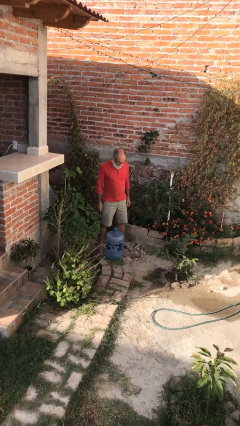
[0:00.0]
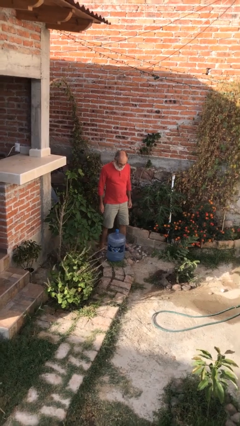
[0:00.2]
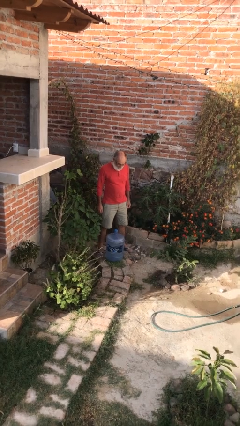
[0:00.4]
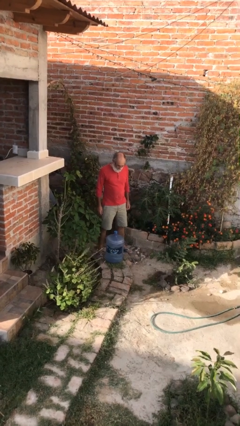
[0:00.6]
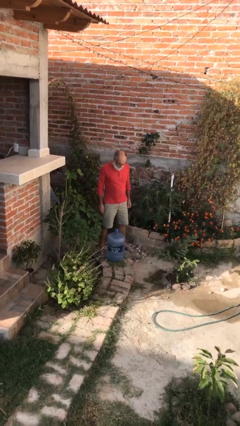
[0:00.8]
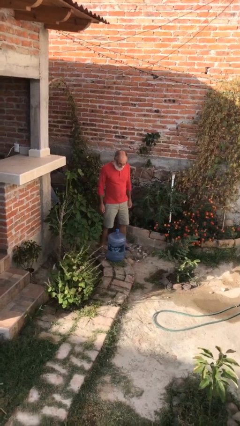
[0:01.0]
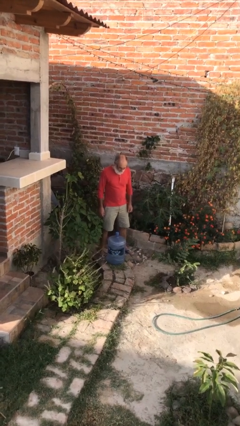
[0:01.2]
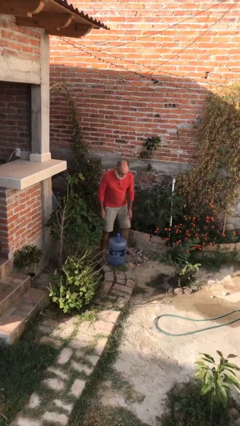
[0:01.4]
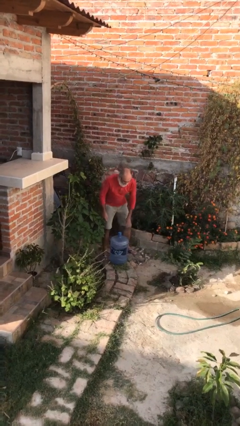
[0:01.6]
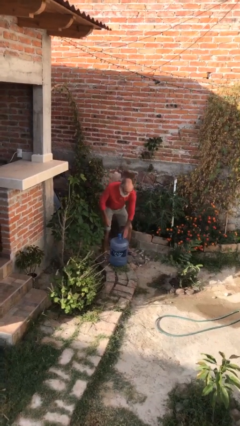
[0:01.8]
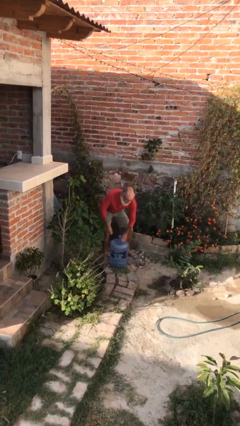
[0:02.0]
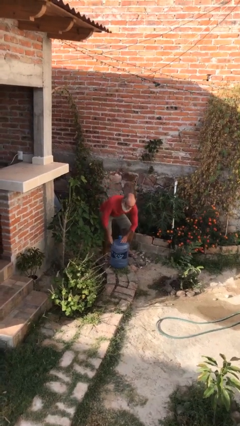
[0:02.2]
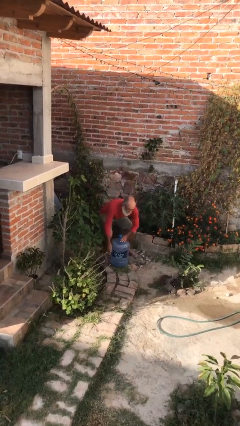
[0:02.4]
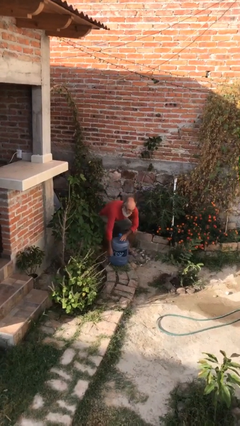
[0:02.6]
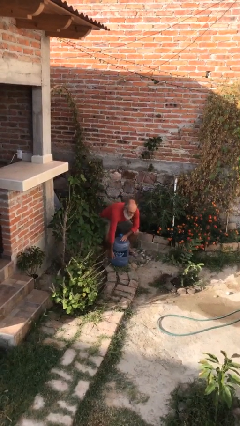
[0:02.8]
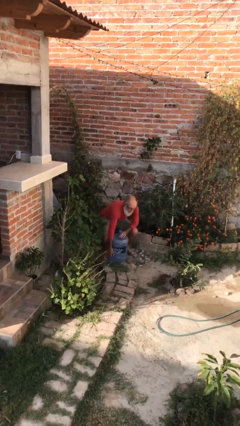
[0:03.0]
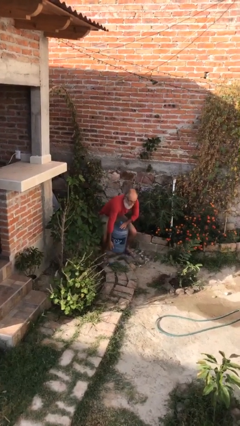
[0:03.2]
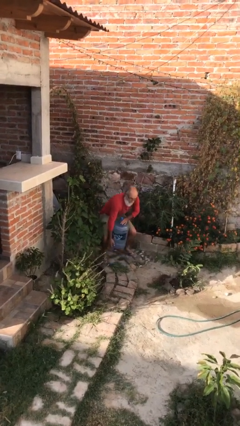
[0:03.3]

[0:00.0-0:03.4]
person picks up object from floor

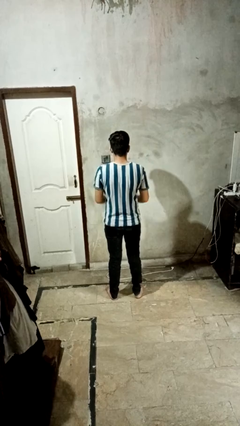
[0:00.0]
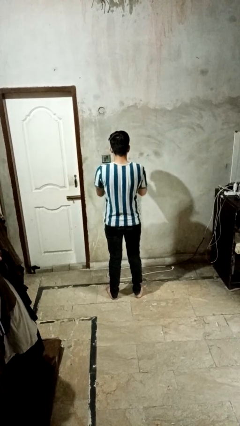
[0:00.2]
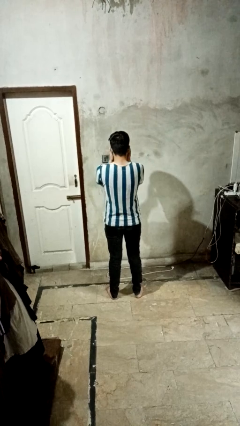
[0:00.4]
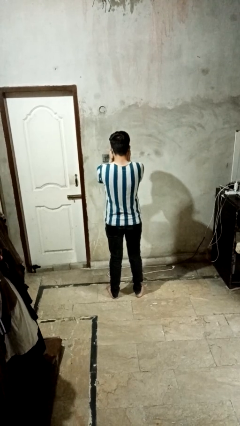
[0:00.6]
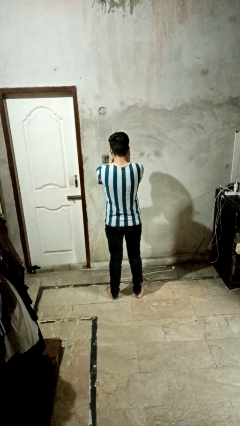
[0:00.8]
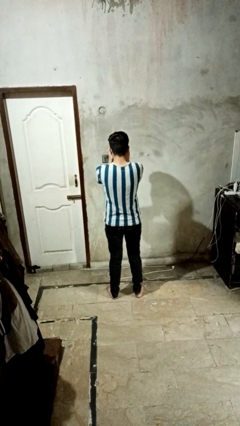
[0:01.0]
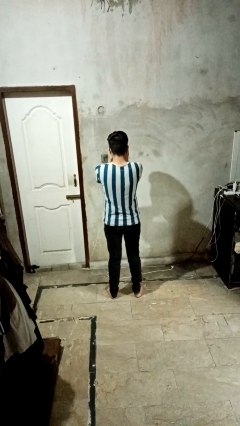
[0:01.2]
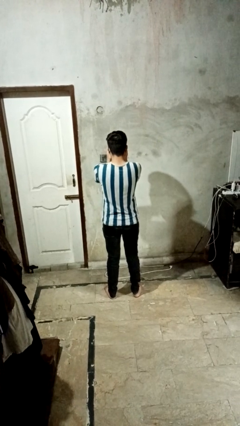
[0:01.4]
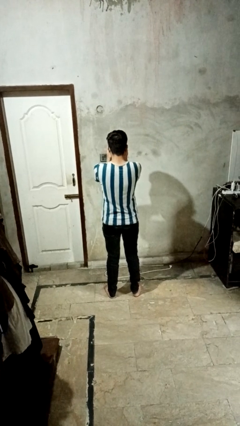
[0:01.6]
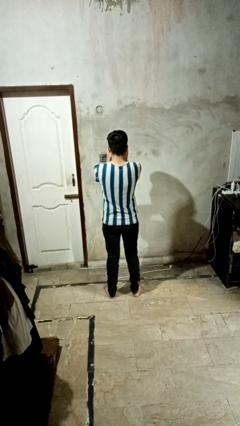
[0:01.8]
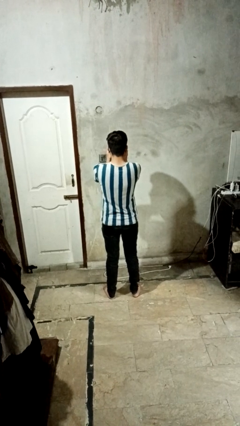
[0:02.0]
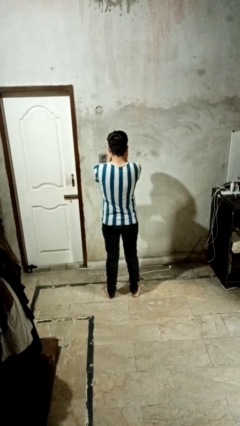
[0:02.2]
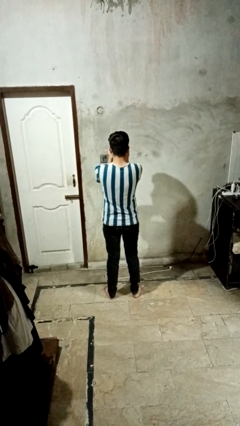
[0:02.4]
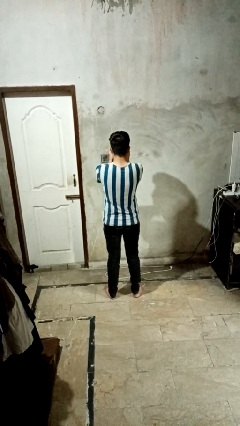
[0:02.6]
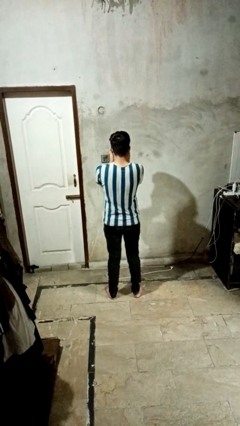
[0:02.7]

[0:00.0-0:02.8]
person covers face with hands

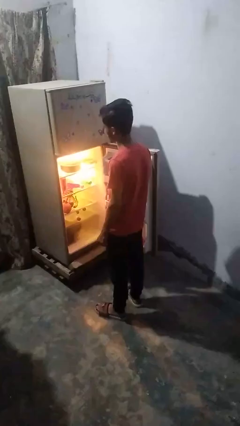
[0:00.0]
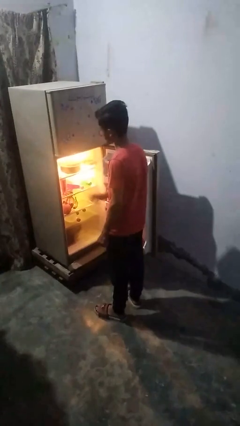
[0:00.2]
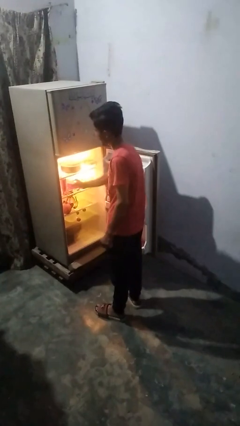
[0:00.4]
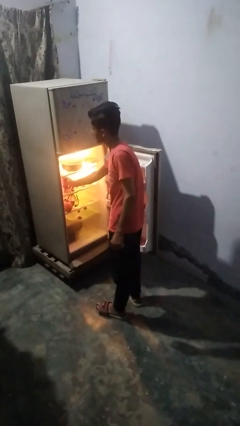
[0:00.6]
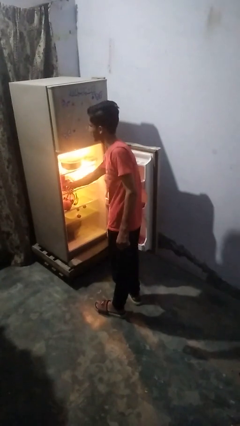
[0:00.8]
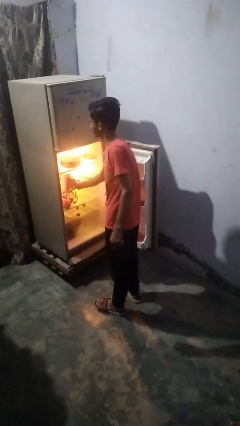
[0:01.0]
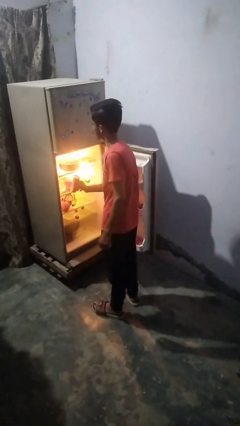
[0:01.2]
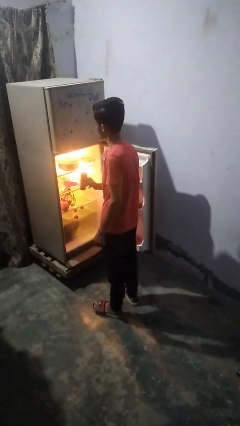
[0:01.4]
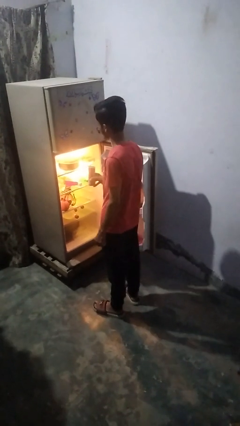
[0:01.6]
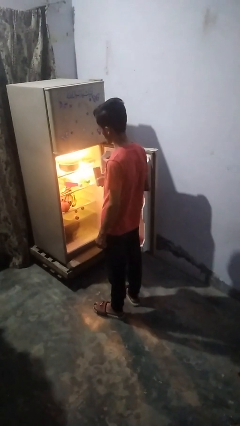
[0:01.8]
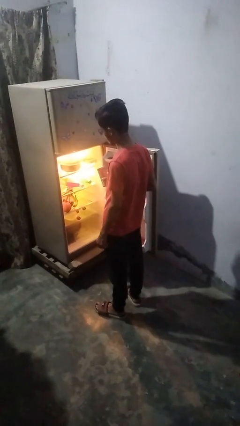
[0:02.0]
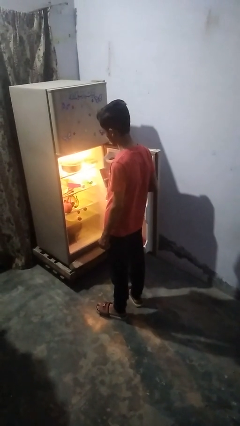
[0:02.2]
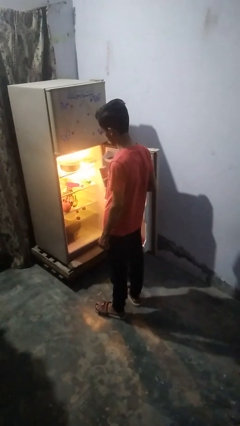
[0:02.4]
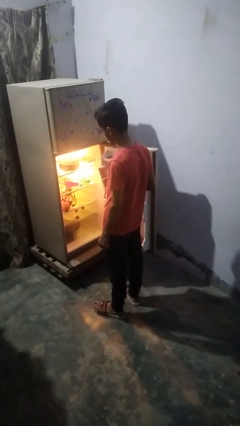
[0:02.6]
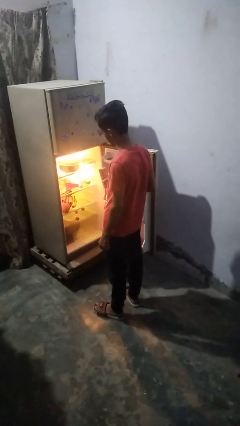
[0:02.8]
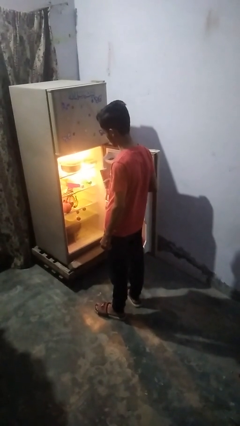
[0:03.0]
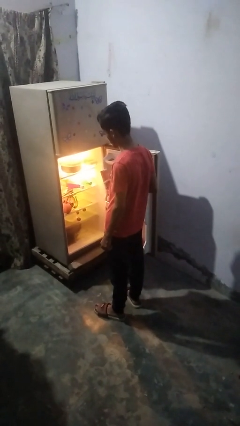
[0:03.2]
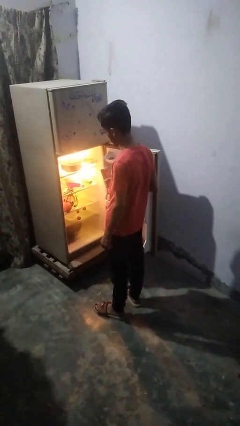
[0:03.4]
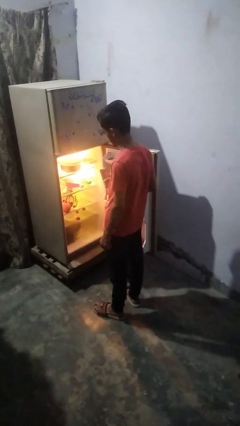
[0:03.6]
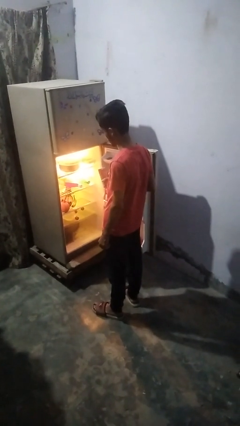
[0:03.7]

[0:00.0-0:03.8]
person puts object into refrigerator

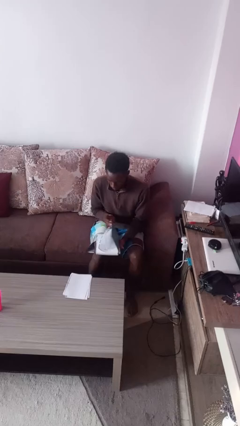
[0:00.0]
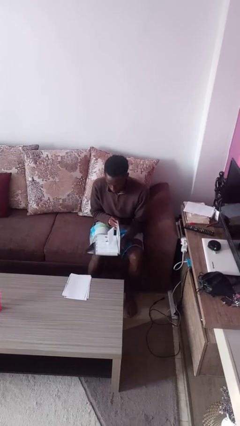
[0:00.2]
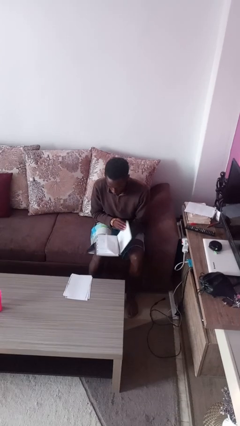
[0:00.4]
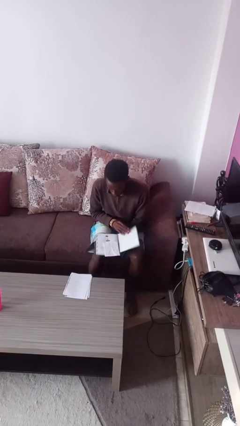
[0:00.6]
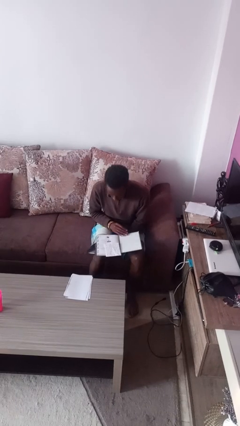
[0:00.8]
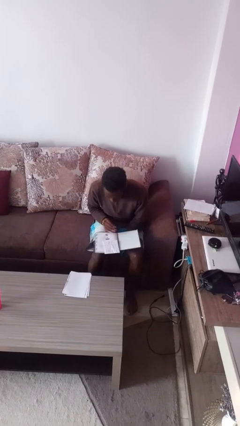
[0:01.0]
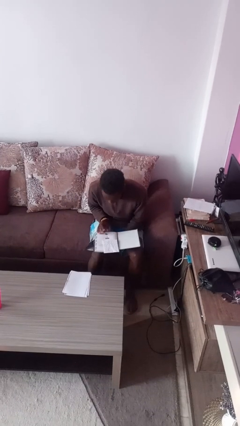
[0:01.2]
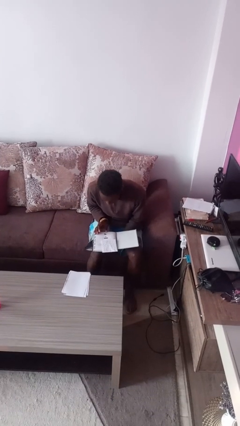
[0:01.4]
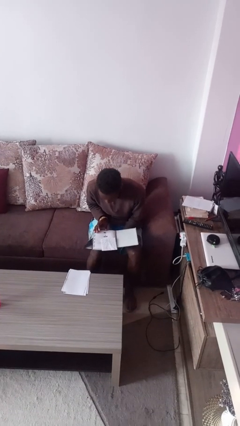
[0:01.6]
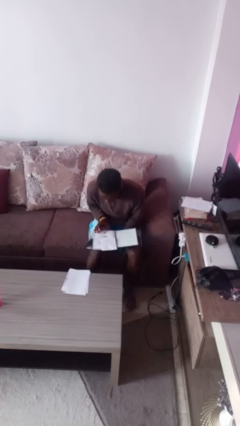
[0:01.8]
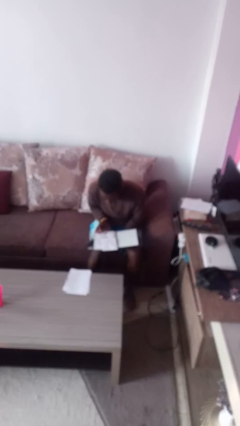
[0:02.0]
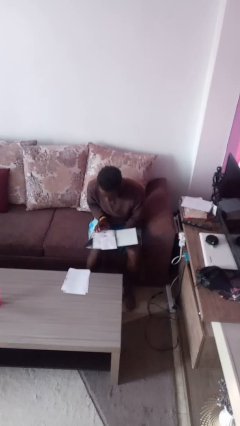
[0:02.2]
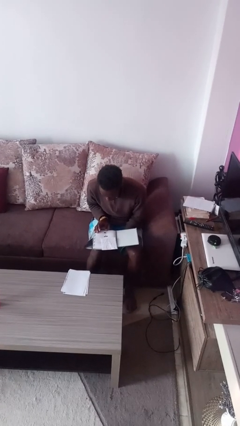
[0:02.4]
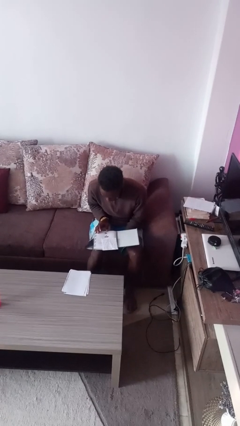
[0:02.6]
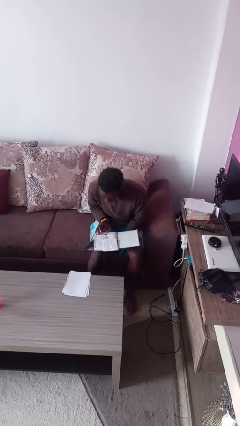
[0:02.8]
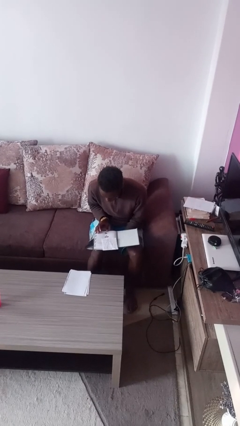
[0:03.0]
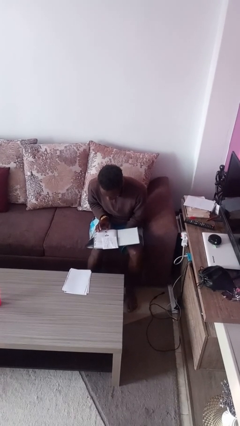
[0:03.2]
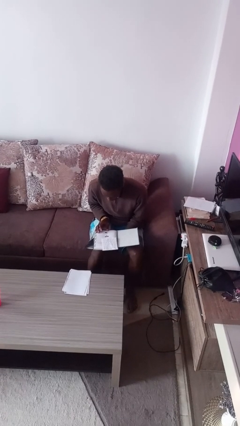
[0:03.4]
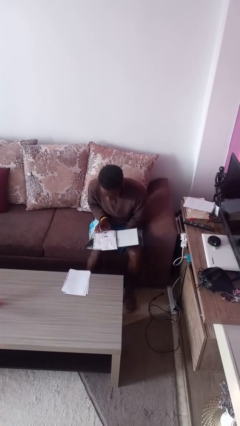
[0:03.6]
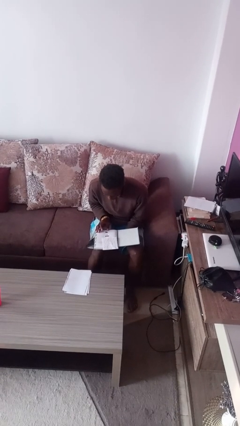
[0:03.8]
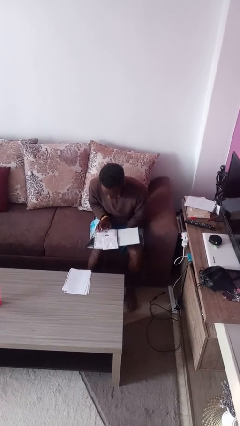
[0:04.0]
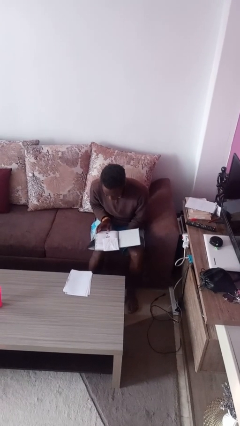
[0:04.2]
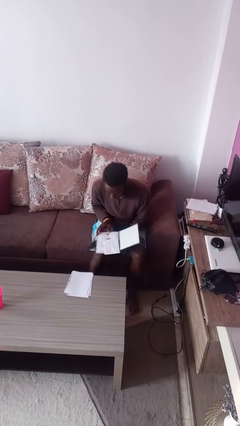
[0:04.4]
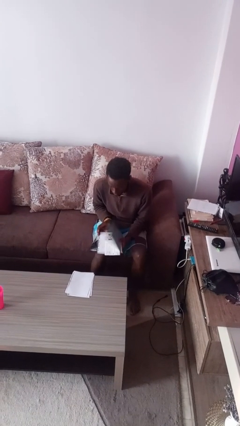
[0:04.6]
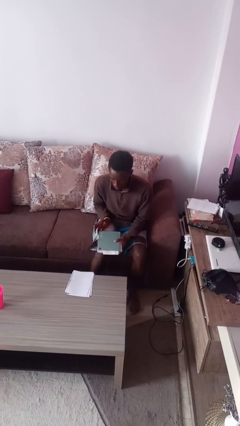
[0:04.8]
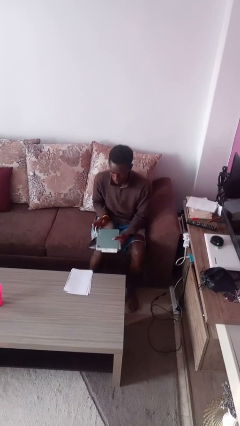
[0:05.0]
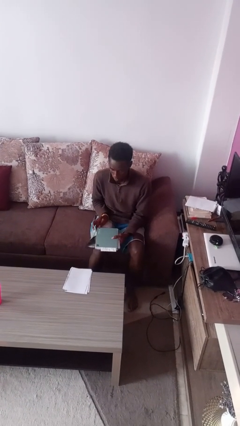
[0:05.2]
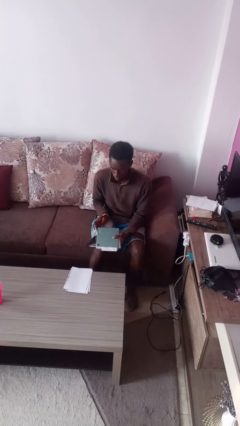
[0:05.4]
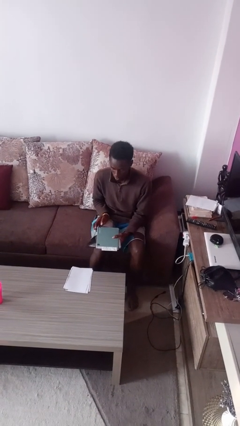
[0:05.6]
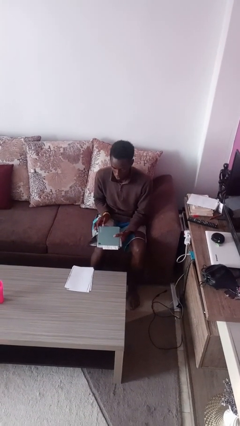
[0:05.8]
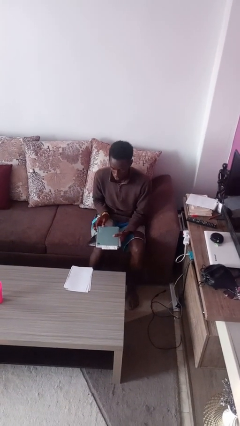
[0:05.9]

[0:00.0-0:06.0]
person reads book

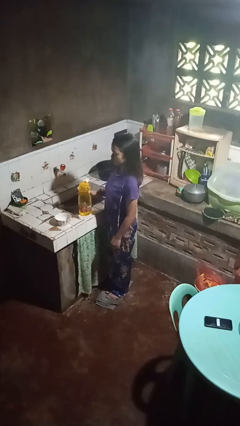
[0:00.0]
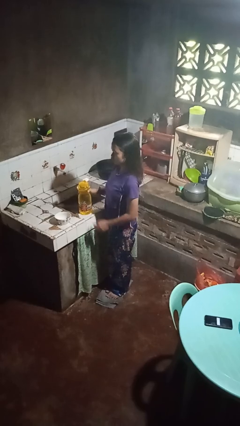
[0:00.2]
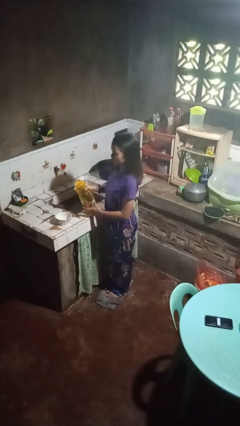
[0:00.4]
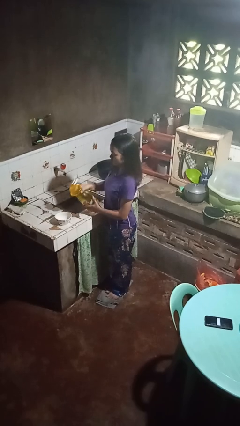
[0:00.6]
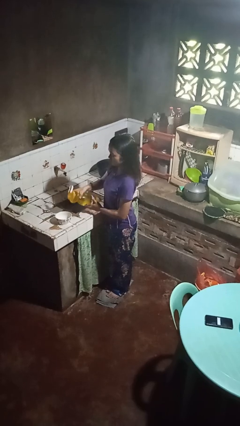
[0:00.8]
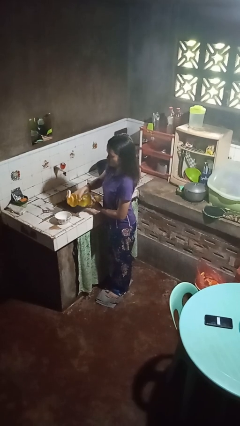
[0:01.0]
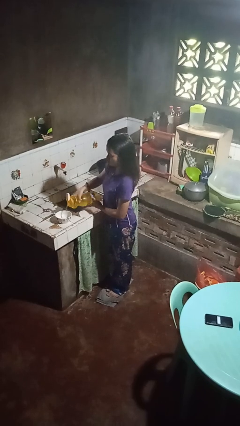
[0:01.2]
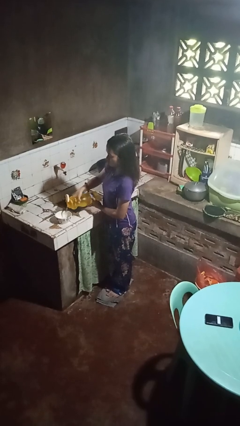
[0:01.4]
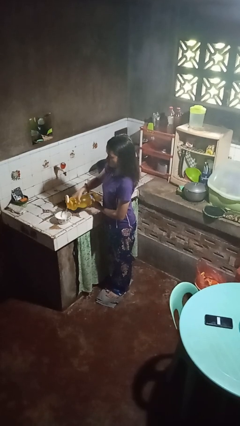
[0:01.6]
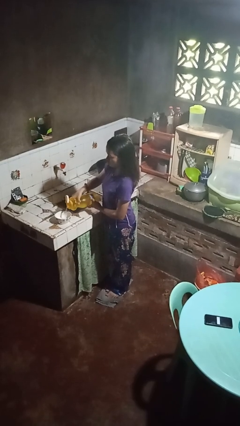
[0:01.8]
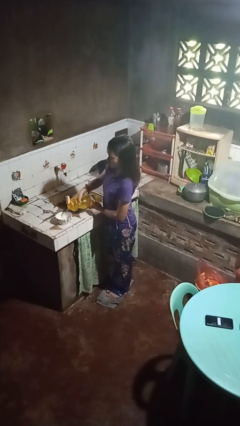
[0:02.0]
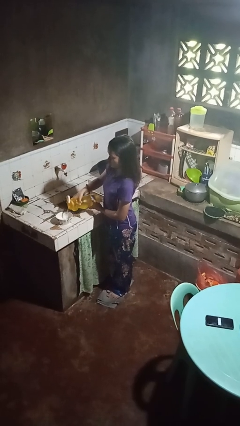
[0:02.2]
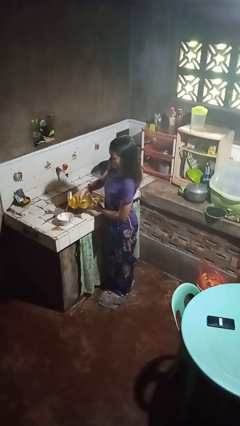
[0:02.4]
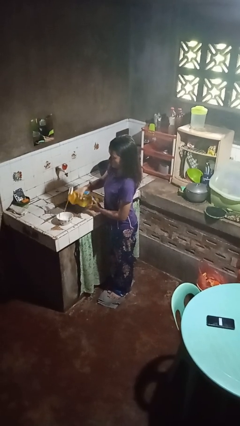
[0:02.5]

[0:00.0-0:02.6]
person pours into bowl
